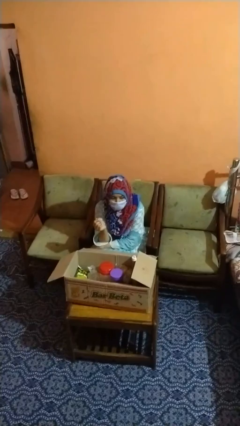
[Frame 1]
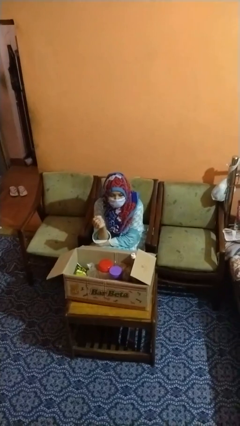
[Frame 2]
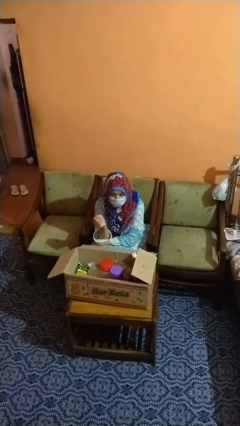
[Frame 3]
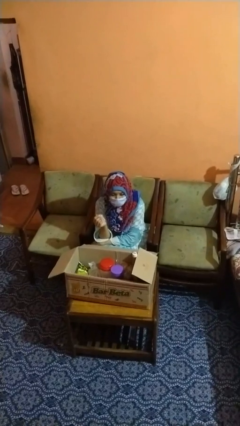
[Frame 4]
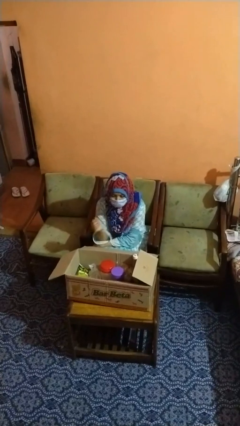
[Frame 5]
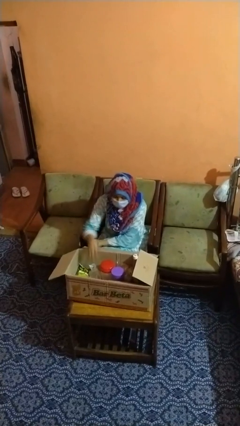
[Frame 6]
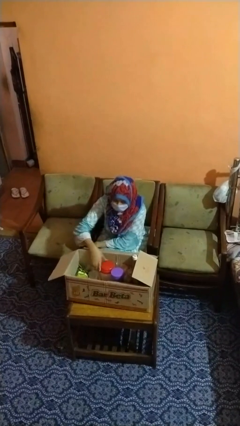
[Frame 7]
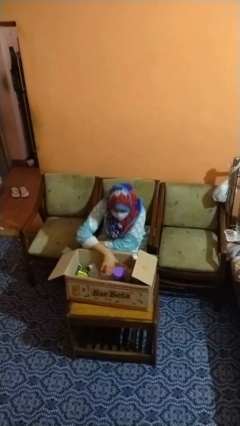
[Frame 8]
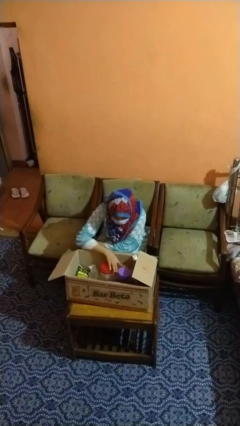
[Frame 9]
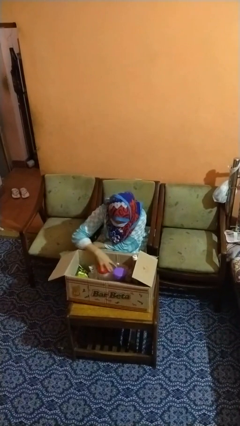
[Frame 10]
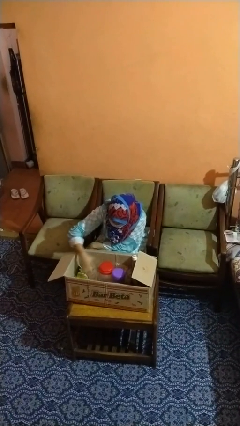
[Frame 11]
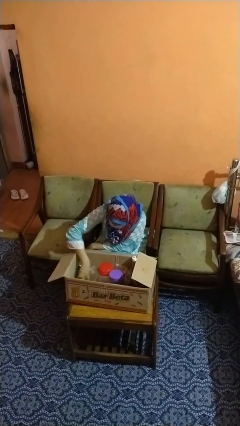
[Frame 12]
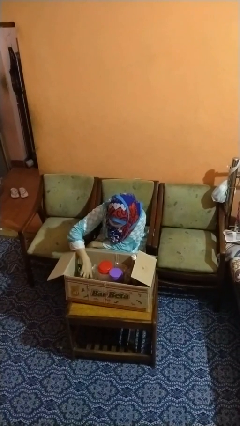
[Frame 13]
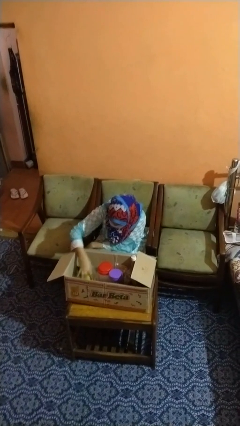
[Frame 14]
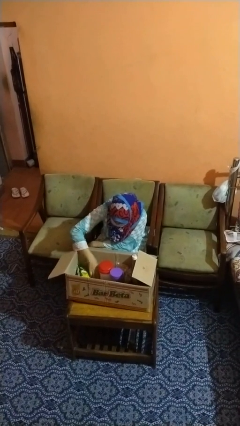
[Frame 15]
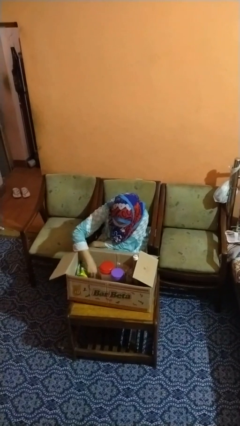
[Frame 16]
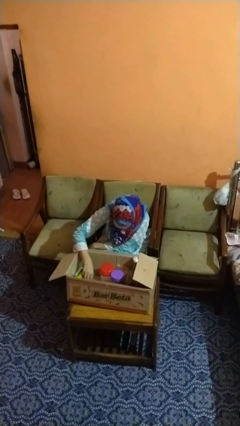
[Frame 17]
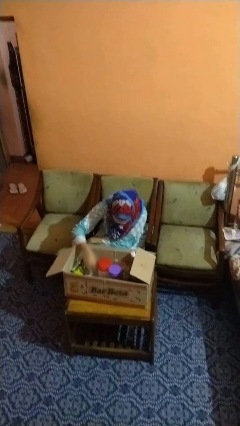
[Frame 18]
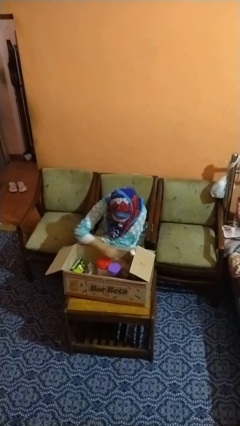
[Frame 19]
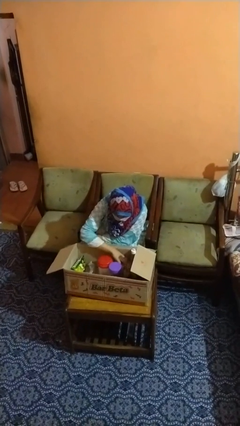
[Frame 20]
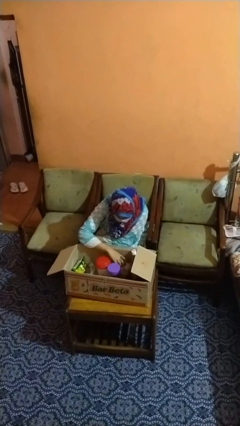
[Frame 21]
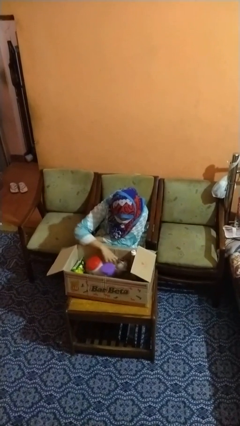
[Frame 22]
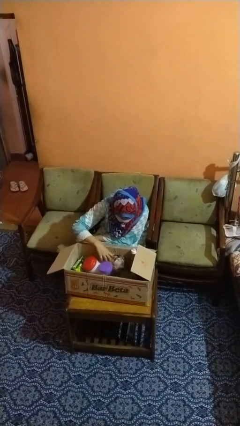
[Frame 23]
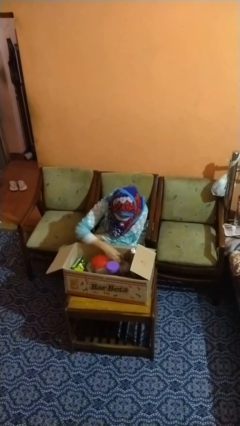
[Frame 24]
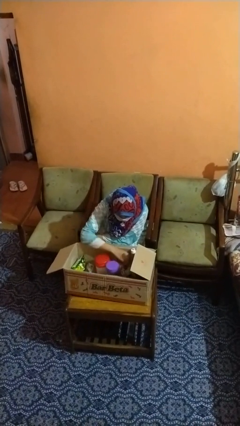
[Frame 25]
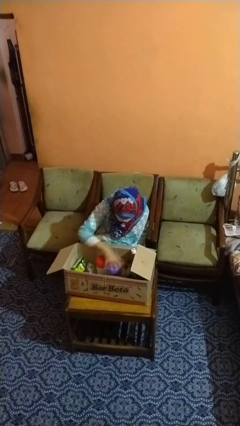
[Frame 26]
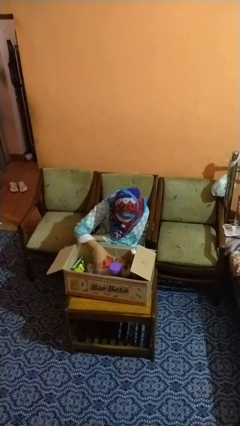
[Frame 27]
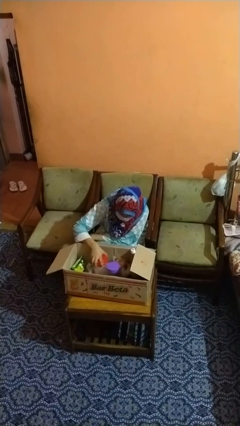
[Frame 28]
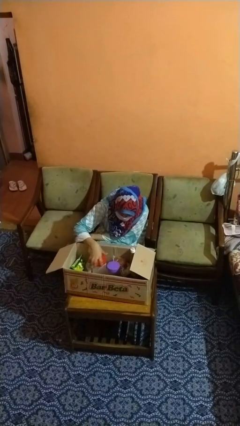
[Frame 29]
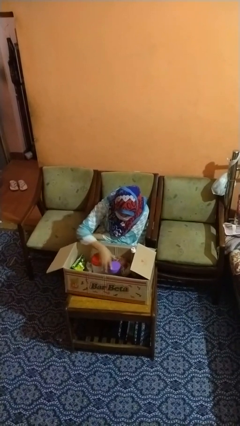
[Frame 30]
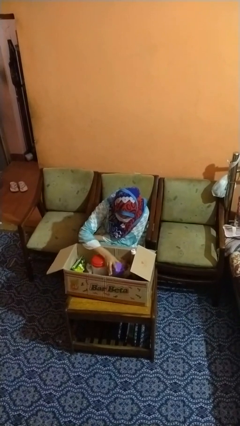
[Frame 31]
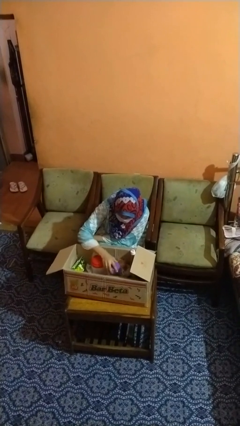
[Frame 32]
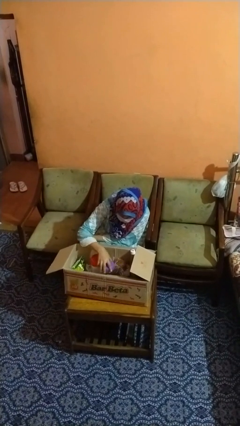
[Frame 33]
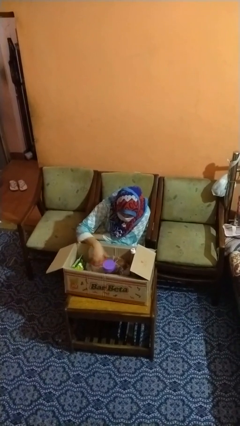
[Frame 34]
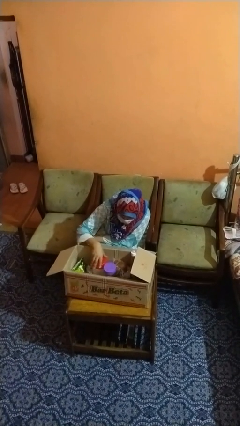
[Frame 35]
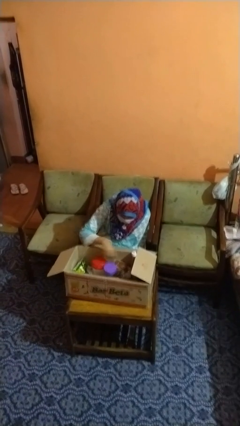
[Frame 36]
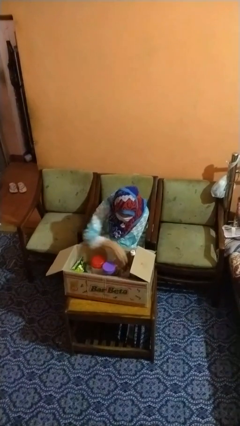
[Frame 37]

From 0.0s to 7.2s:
person searches in box

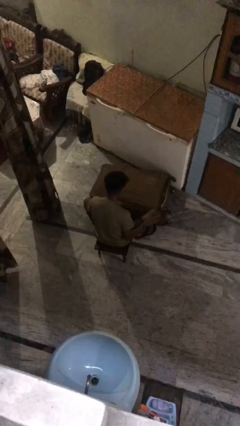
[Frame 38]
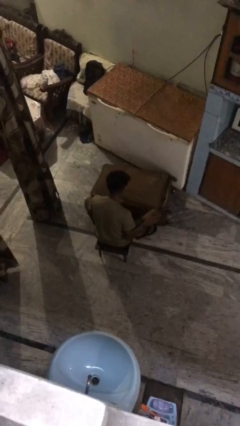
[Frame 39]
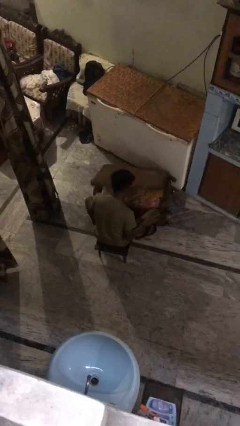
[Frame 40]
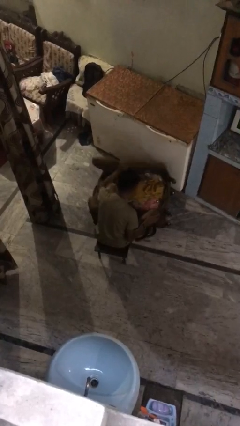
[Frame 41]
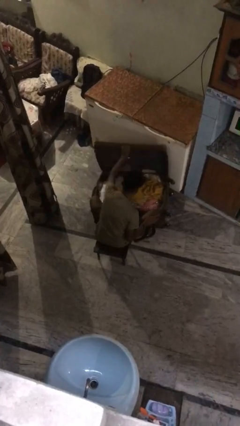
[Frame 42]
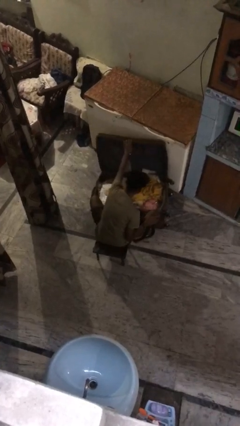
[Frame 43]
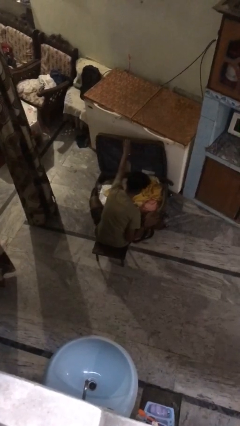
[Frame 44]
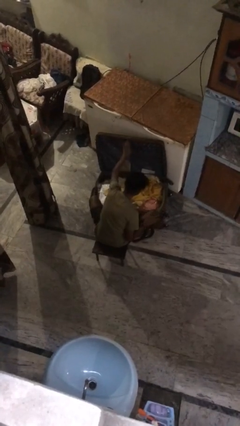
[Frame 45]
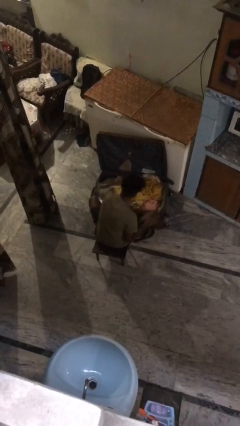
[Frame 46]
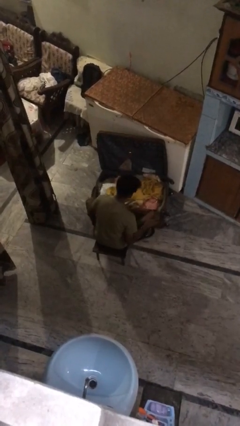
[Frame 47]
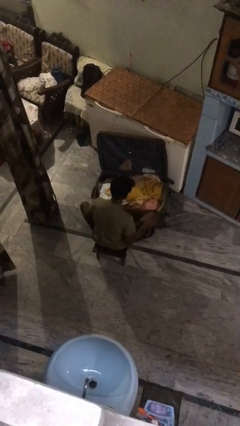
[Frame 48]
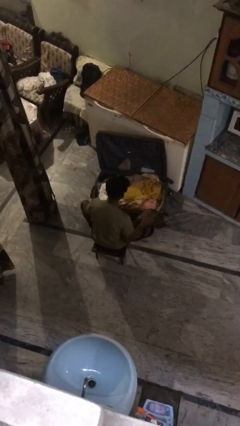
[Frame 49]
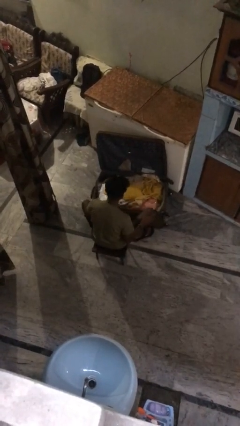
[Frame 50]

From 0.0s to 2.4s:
person opens suitcase

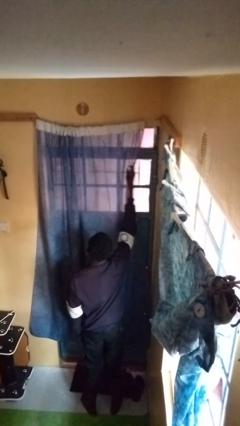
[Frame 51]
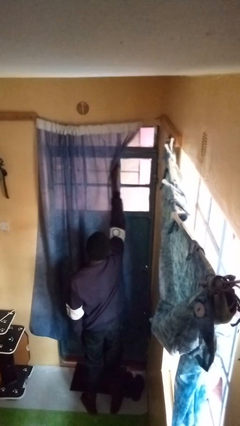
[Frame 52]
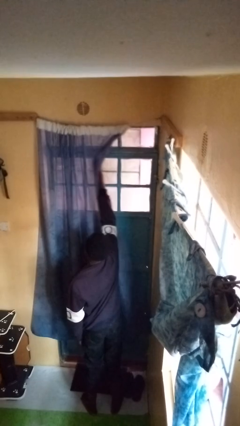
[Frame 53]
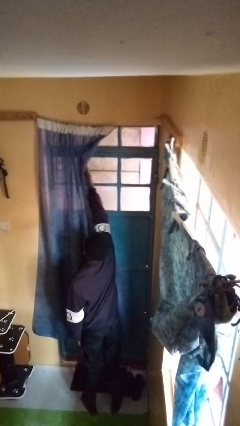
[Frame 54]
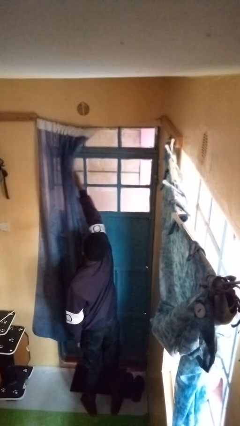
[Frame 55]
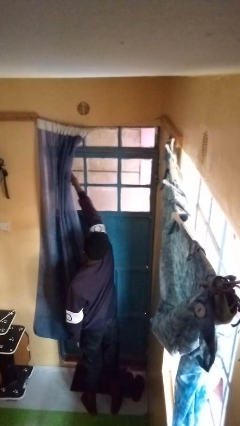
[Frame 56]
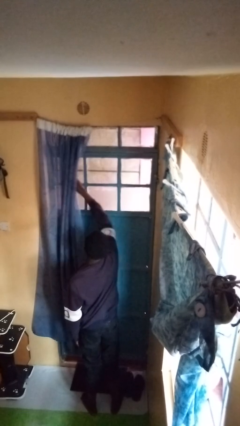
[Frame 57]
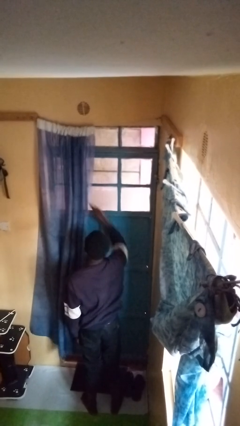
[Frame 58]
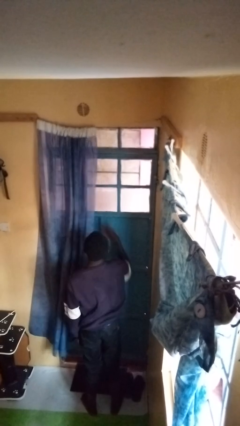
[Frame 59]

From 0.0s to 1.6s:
person opens curtains

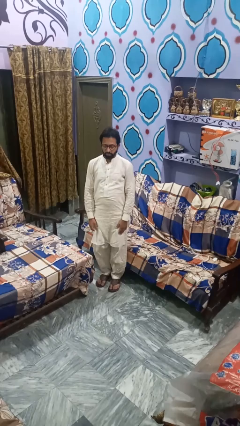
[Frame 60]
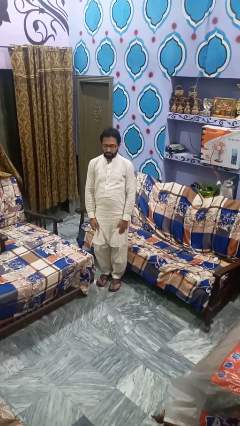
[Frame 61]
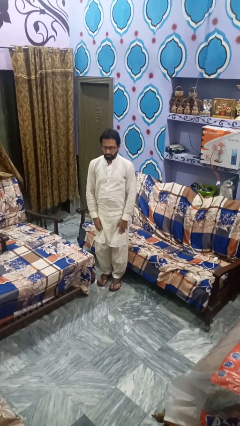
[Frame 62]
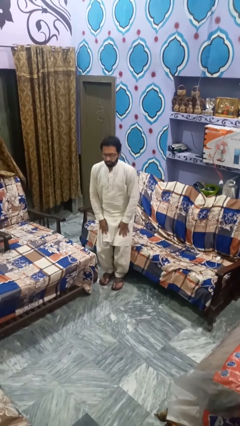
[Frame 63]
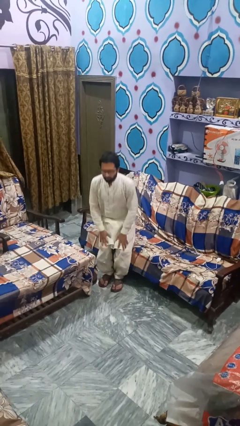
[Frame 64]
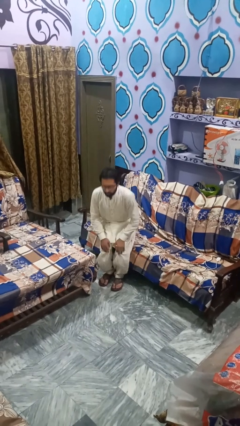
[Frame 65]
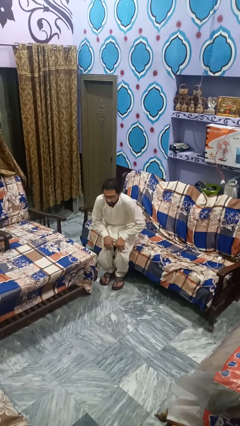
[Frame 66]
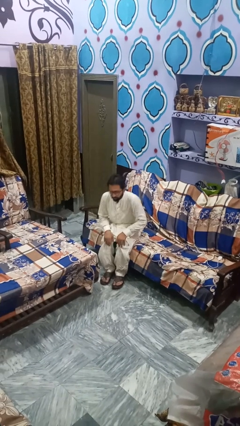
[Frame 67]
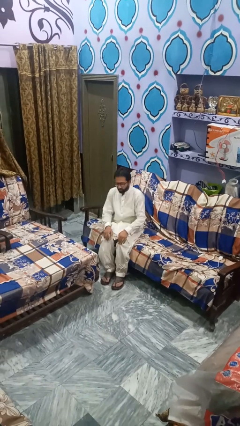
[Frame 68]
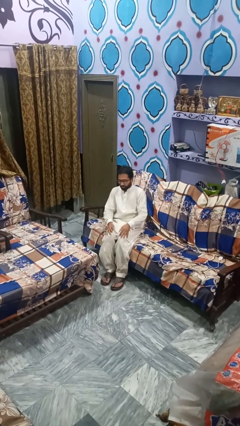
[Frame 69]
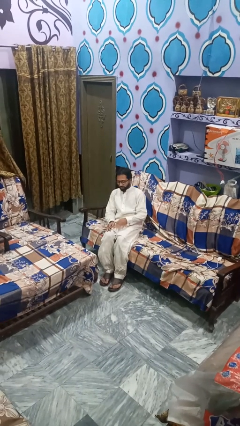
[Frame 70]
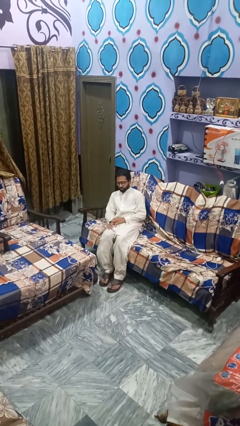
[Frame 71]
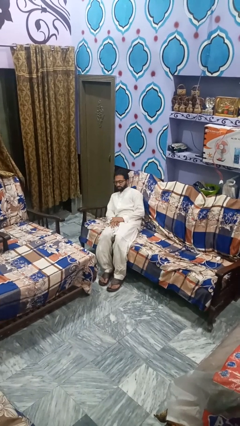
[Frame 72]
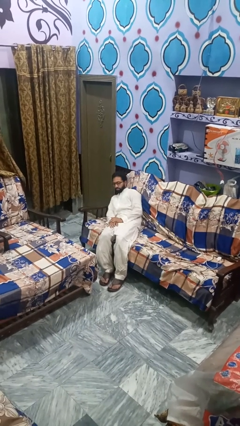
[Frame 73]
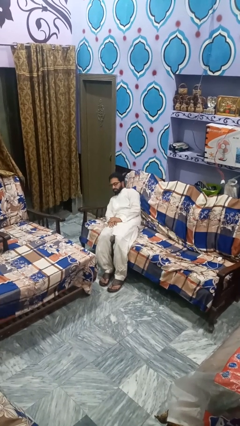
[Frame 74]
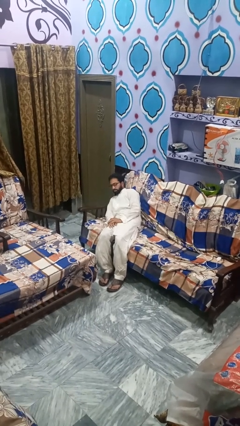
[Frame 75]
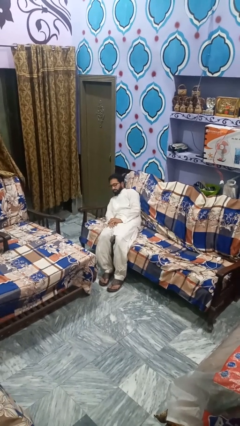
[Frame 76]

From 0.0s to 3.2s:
person lies down on couch

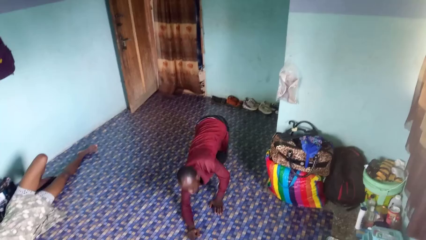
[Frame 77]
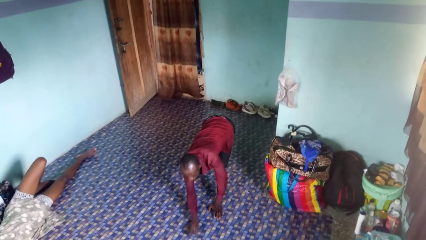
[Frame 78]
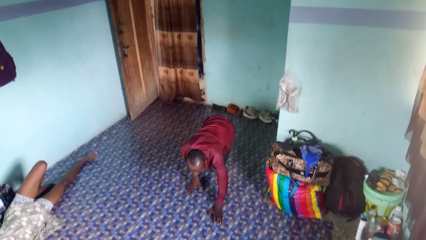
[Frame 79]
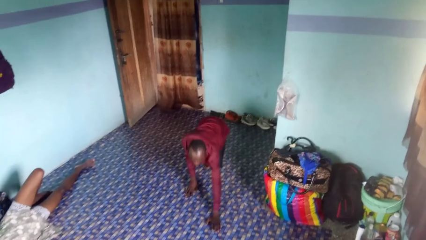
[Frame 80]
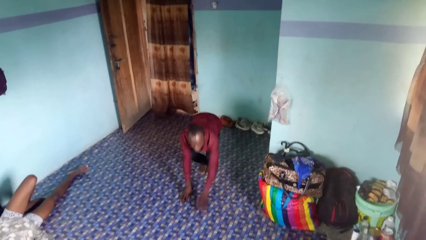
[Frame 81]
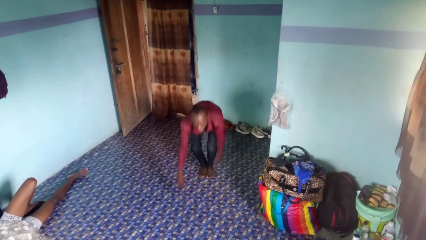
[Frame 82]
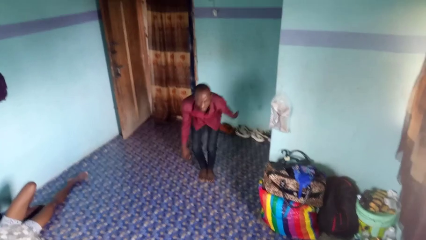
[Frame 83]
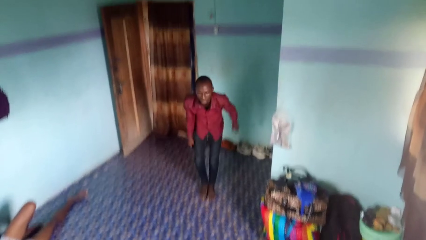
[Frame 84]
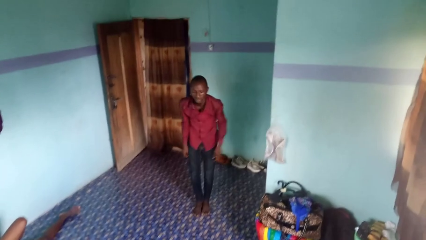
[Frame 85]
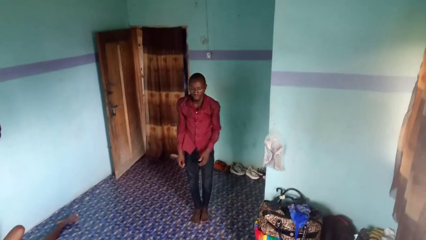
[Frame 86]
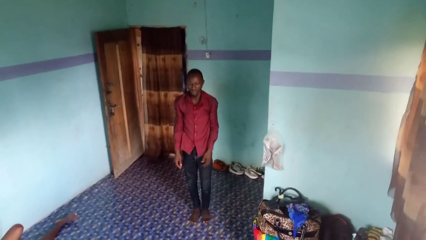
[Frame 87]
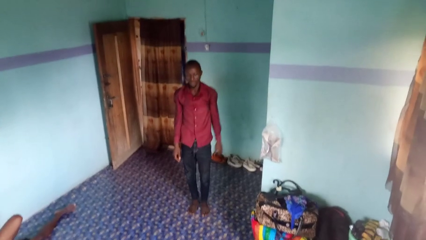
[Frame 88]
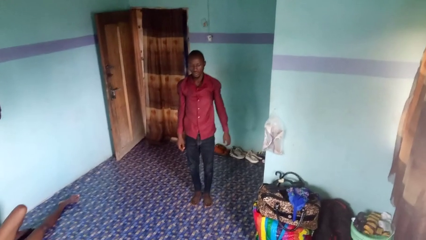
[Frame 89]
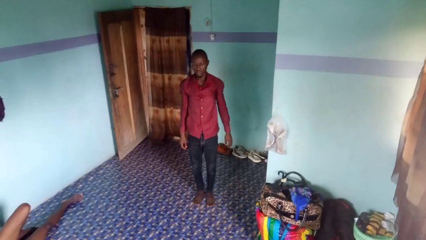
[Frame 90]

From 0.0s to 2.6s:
person stands up from floor

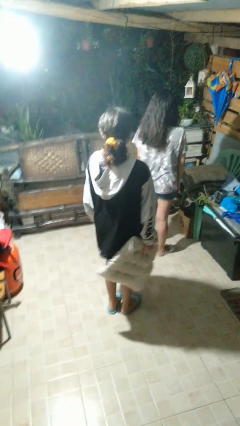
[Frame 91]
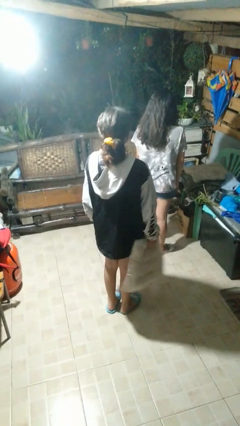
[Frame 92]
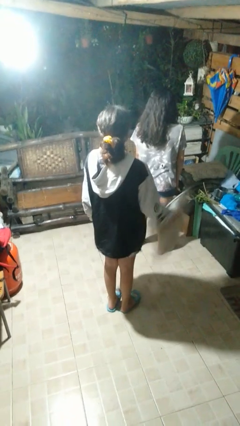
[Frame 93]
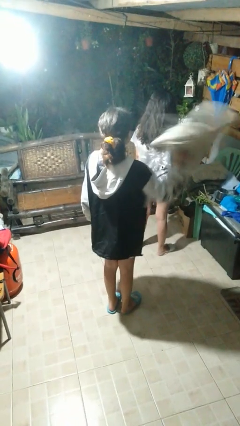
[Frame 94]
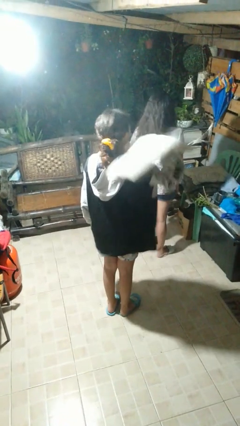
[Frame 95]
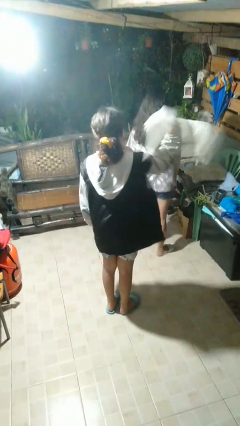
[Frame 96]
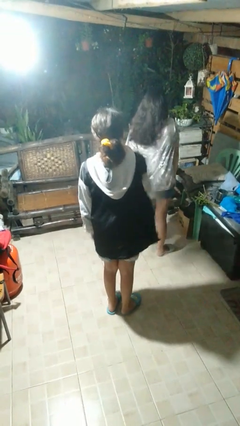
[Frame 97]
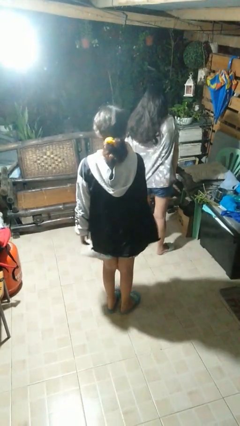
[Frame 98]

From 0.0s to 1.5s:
person hits person with pillow
